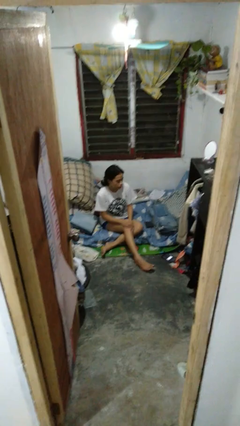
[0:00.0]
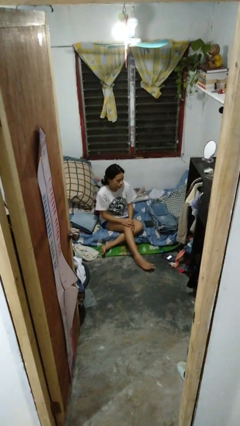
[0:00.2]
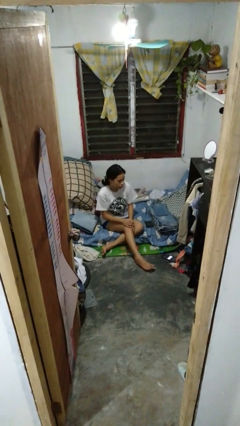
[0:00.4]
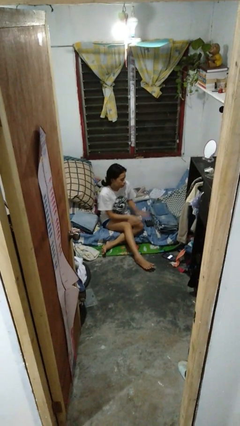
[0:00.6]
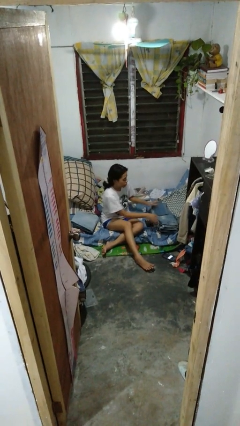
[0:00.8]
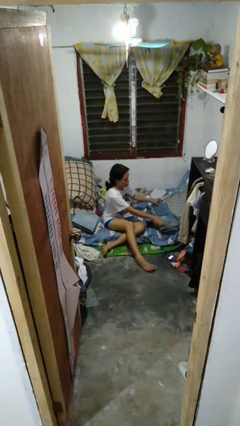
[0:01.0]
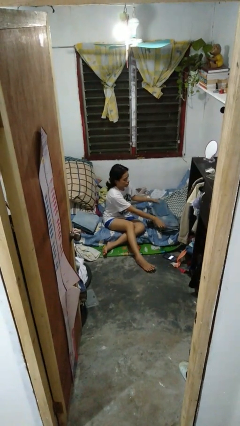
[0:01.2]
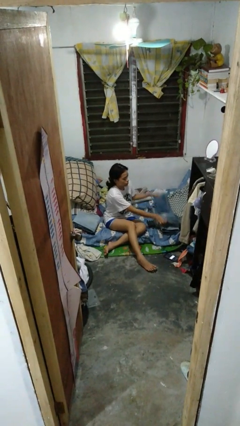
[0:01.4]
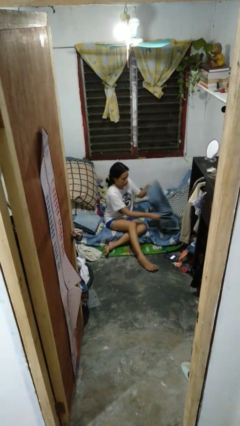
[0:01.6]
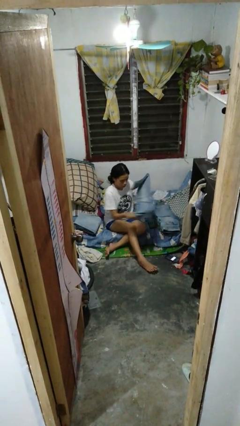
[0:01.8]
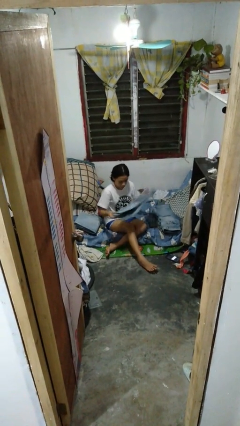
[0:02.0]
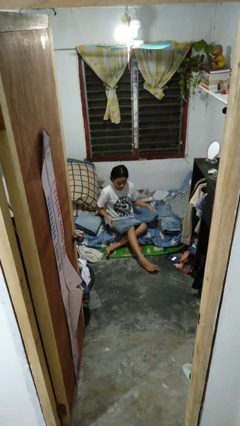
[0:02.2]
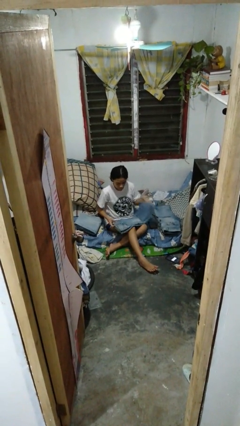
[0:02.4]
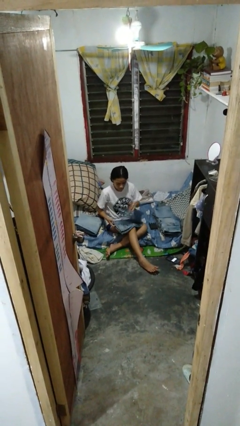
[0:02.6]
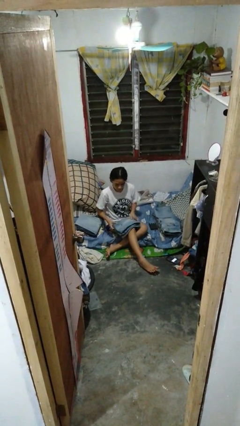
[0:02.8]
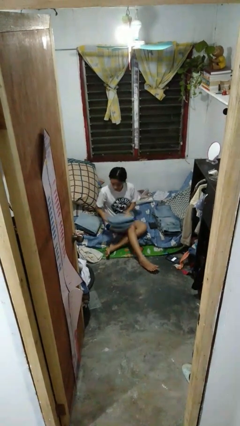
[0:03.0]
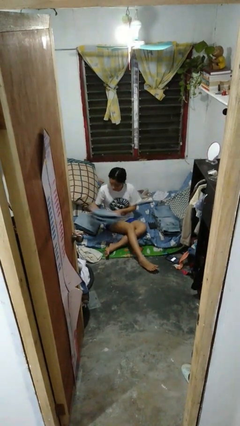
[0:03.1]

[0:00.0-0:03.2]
person folds pants

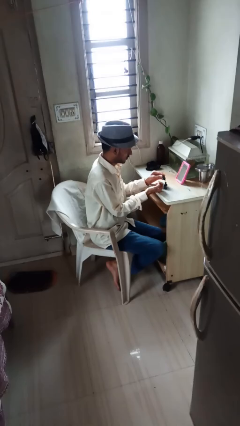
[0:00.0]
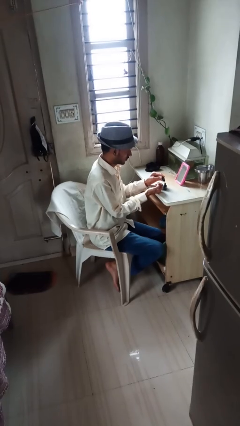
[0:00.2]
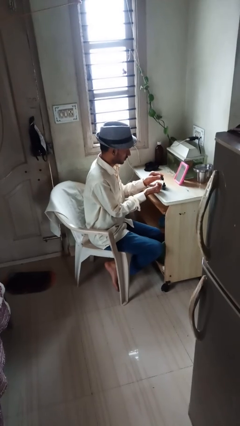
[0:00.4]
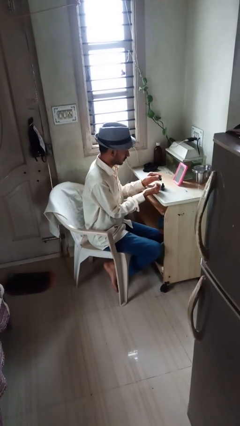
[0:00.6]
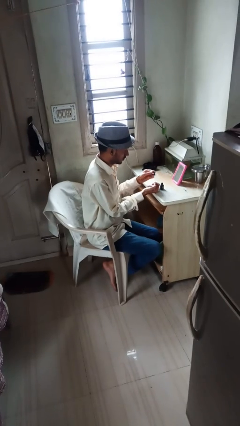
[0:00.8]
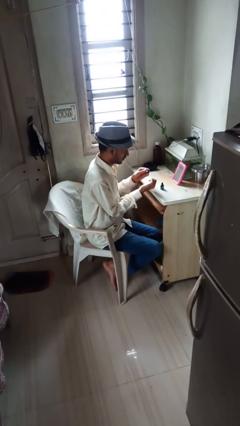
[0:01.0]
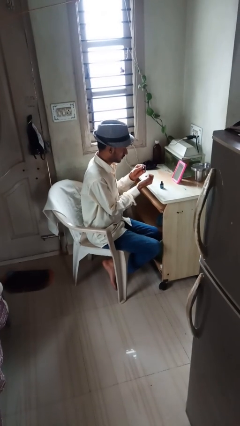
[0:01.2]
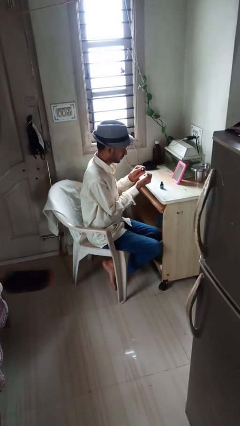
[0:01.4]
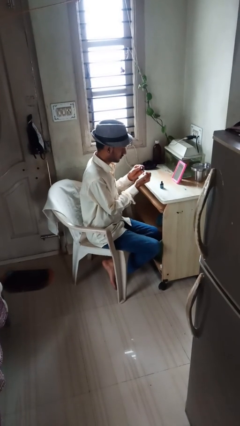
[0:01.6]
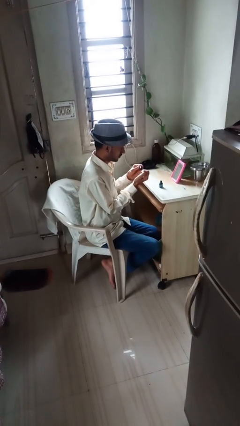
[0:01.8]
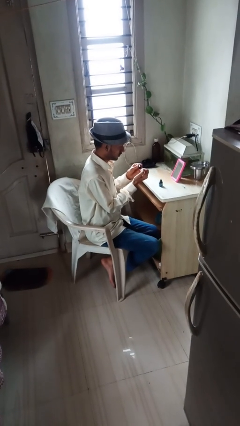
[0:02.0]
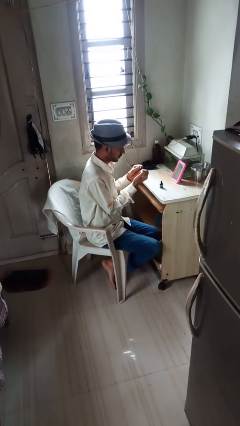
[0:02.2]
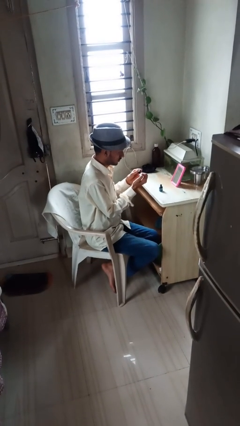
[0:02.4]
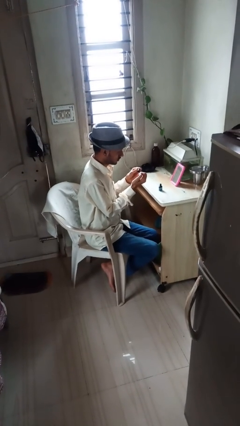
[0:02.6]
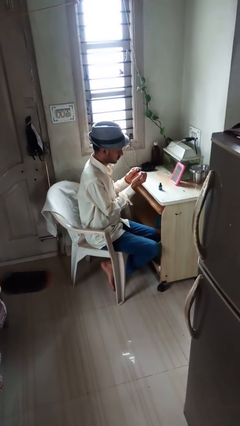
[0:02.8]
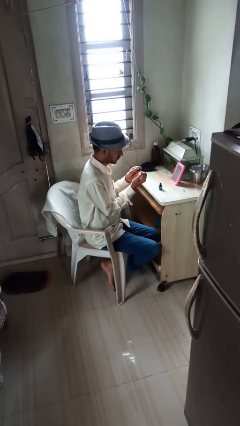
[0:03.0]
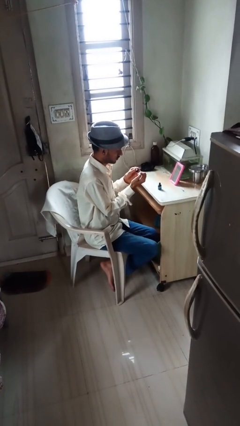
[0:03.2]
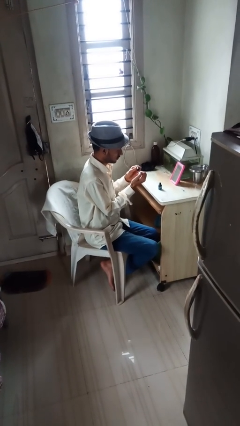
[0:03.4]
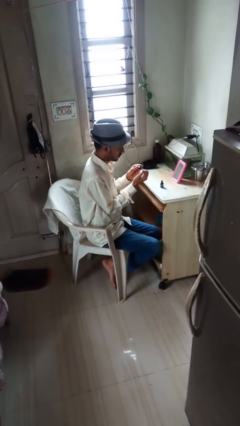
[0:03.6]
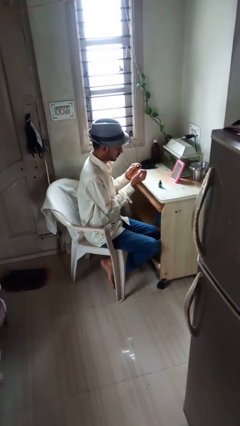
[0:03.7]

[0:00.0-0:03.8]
person paints fingernails

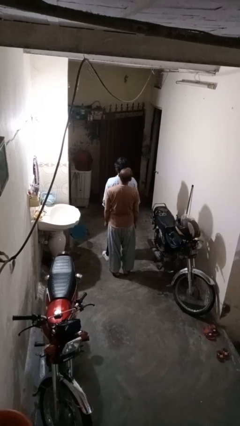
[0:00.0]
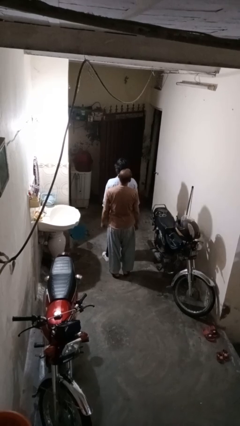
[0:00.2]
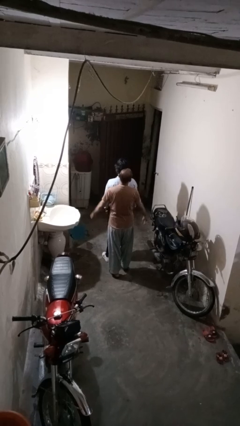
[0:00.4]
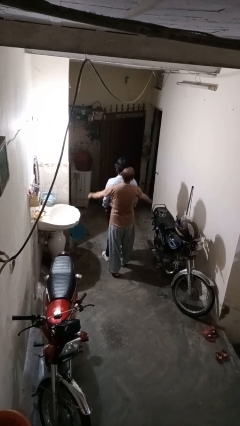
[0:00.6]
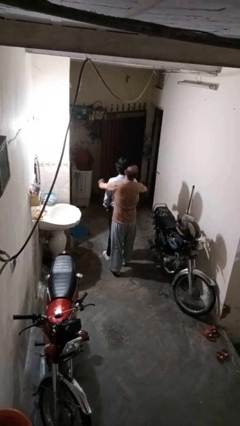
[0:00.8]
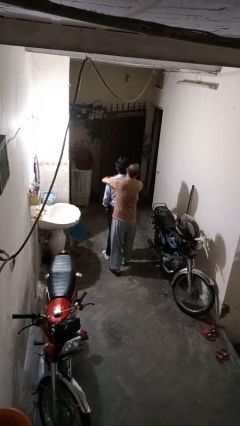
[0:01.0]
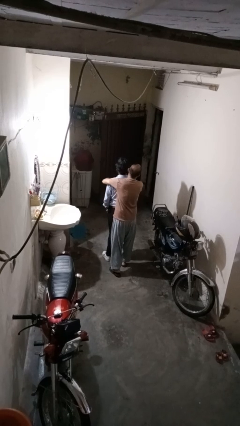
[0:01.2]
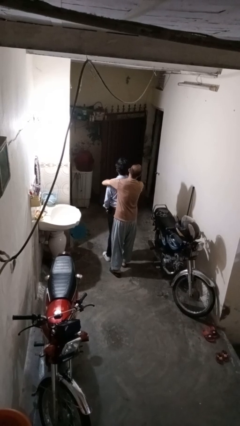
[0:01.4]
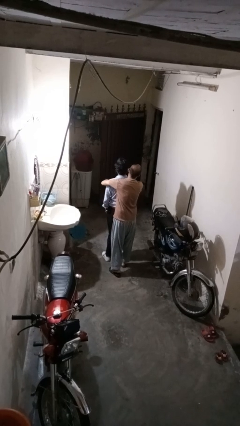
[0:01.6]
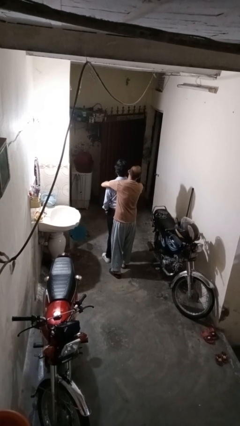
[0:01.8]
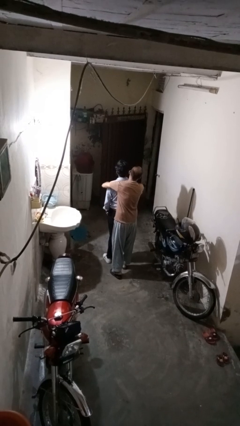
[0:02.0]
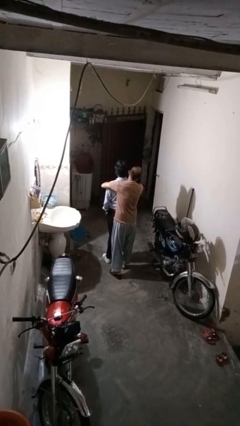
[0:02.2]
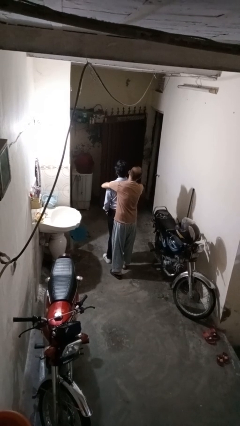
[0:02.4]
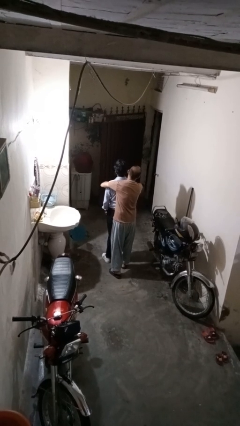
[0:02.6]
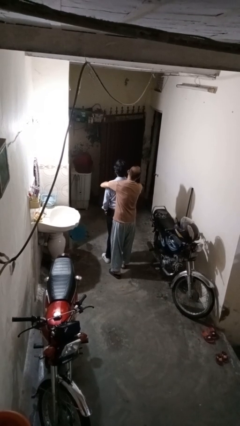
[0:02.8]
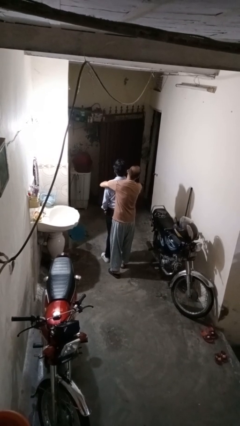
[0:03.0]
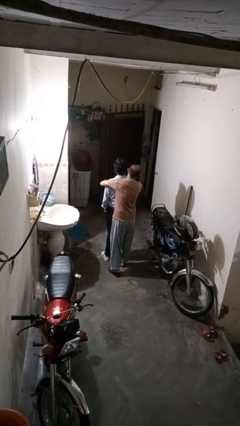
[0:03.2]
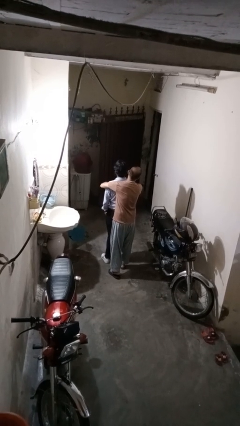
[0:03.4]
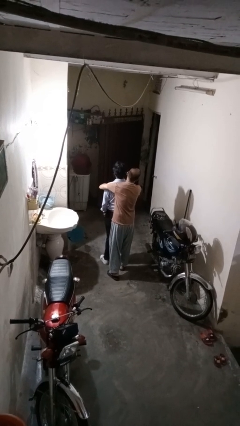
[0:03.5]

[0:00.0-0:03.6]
person hugs person from behind

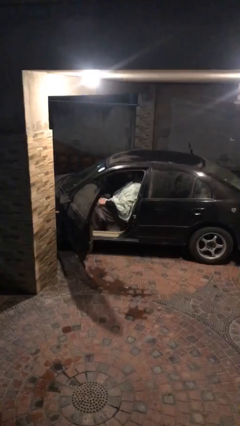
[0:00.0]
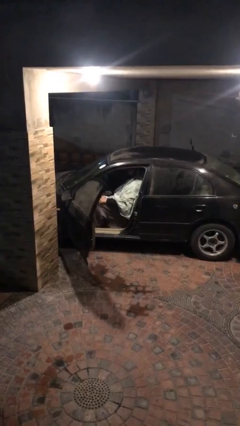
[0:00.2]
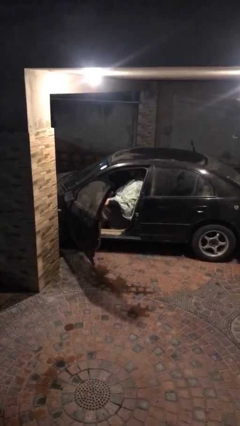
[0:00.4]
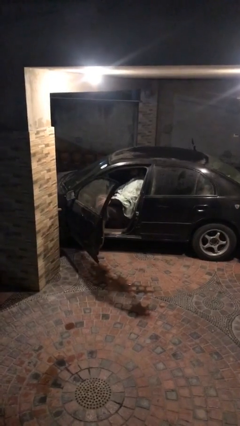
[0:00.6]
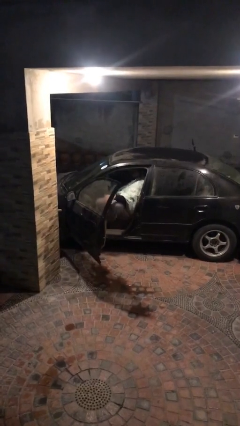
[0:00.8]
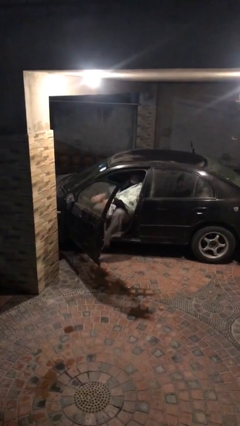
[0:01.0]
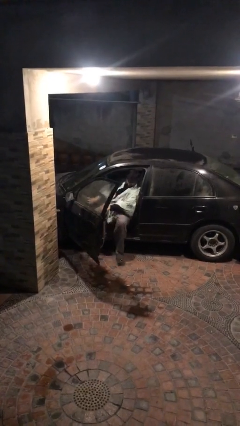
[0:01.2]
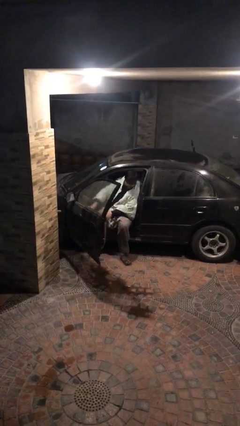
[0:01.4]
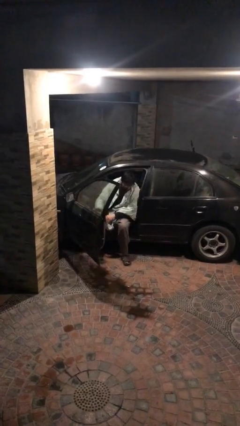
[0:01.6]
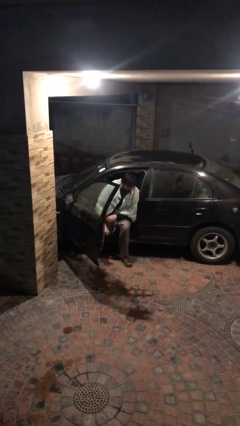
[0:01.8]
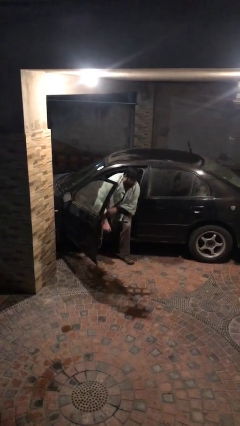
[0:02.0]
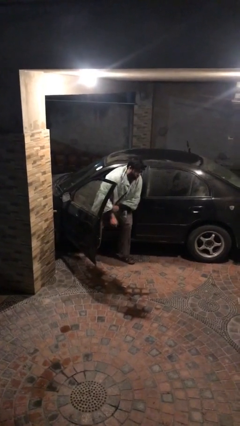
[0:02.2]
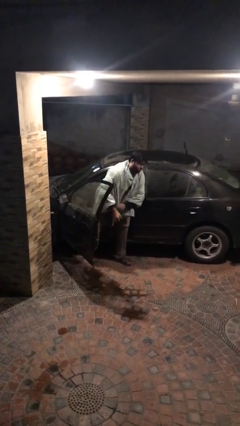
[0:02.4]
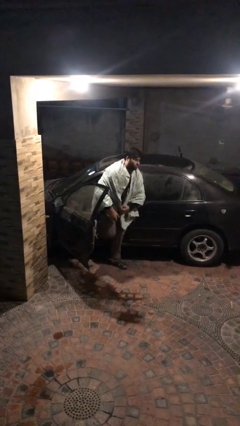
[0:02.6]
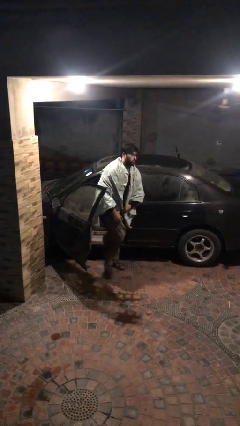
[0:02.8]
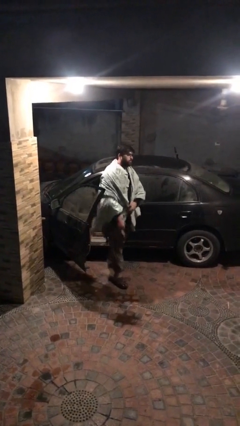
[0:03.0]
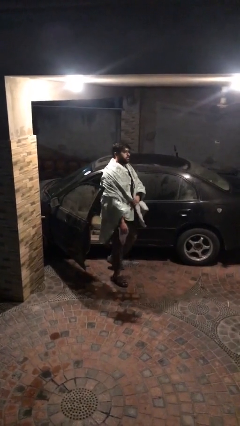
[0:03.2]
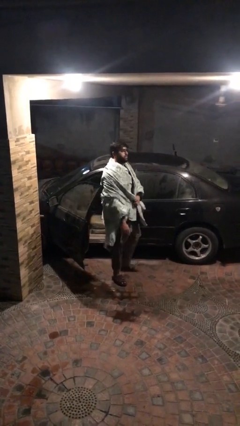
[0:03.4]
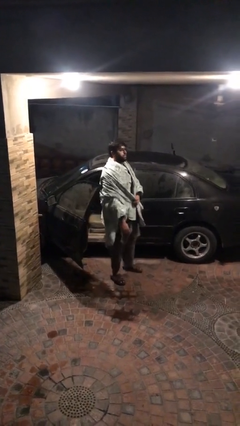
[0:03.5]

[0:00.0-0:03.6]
person exits car

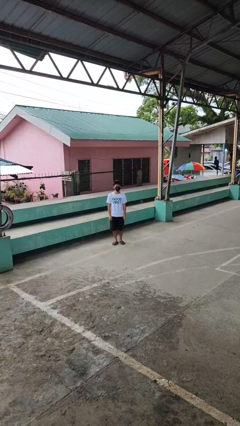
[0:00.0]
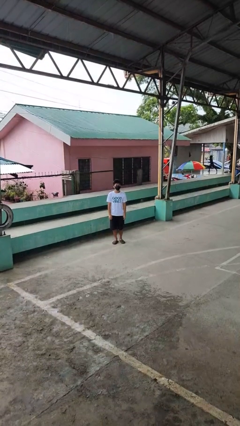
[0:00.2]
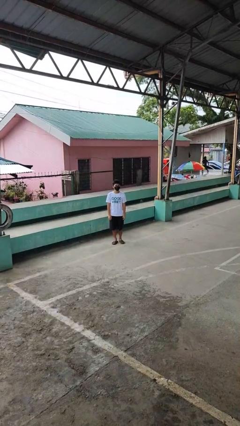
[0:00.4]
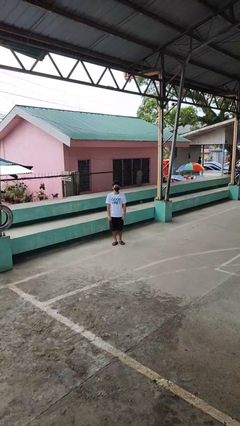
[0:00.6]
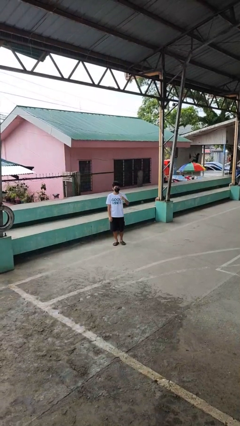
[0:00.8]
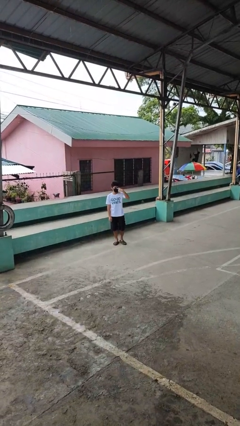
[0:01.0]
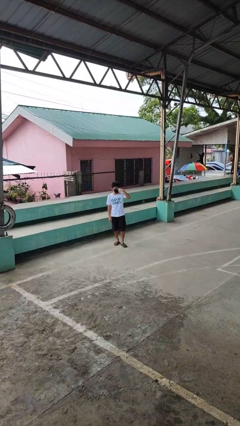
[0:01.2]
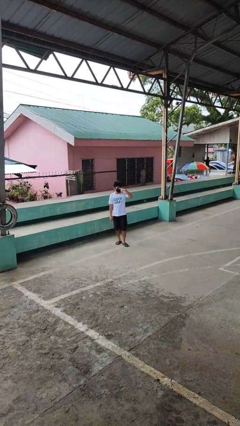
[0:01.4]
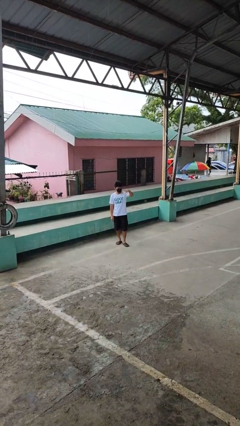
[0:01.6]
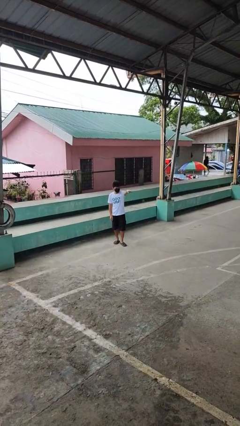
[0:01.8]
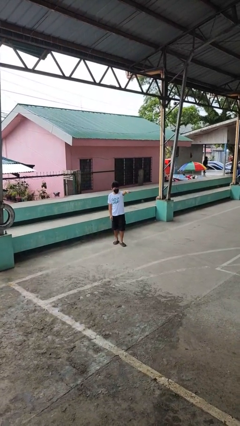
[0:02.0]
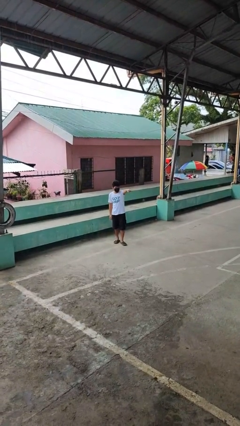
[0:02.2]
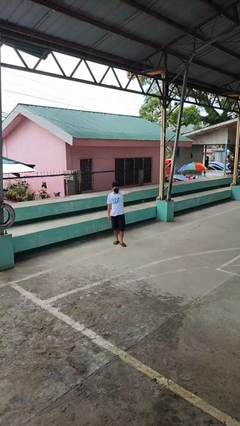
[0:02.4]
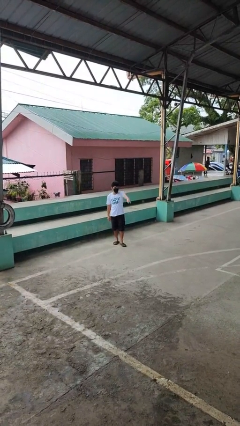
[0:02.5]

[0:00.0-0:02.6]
person gestures watch closely

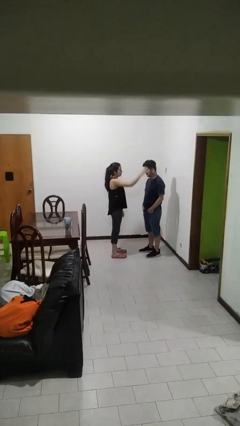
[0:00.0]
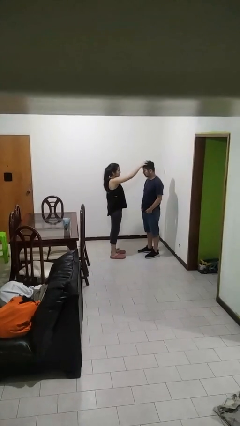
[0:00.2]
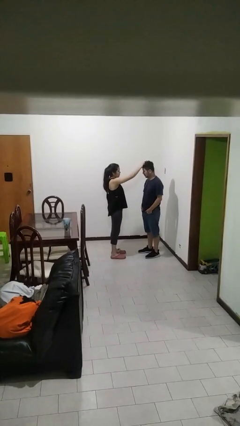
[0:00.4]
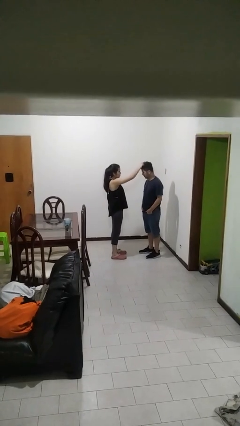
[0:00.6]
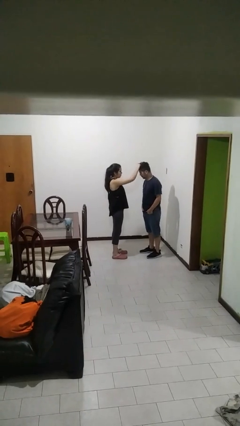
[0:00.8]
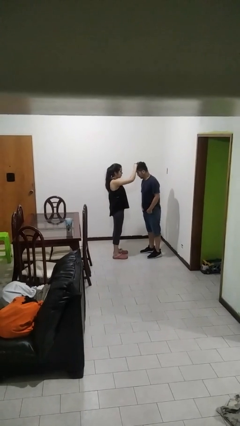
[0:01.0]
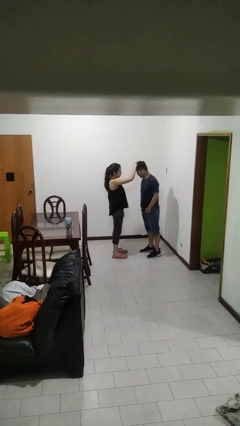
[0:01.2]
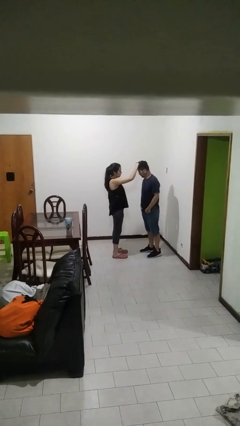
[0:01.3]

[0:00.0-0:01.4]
person grabs person by hair
